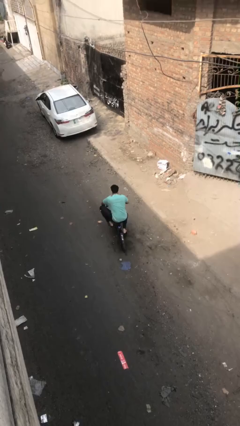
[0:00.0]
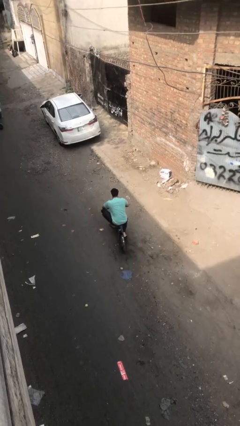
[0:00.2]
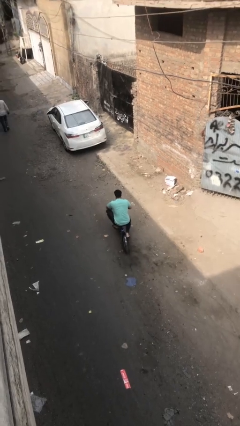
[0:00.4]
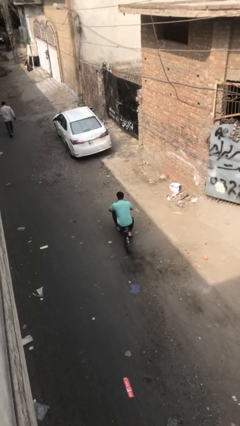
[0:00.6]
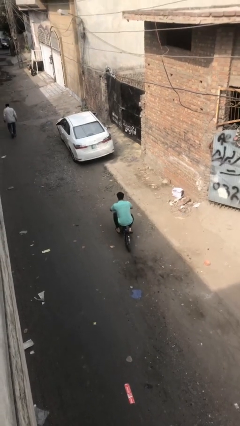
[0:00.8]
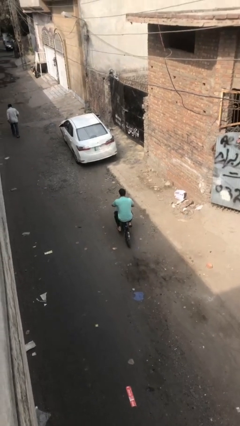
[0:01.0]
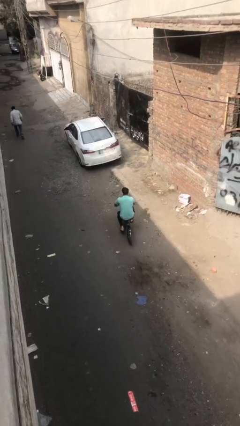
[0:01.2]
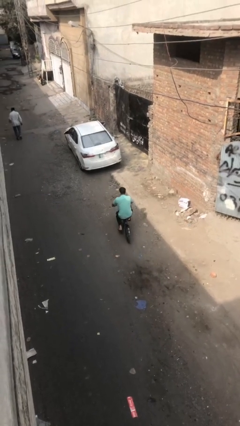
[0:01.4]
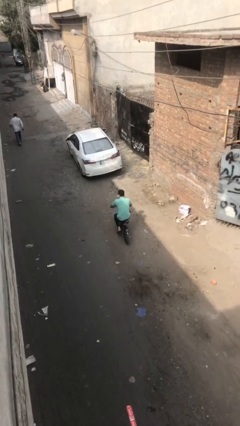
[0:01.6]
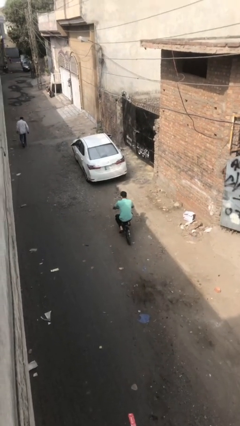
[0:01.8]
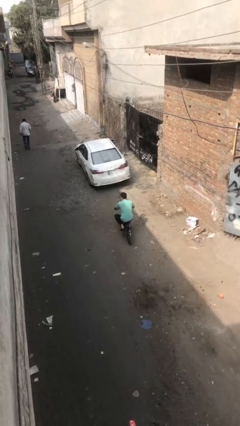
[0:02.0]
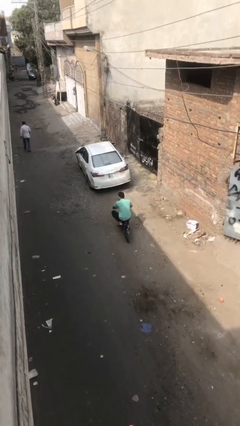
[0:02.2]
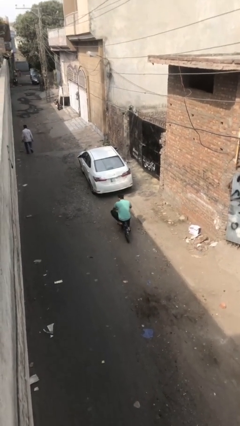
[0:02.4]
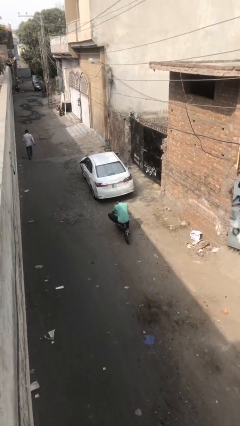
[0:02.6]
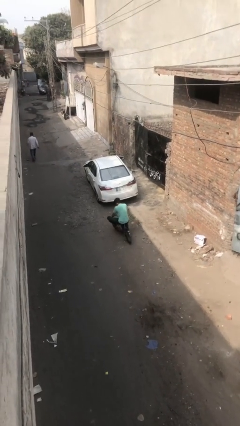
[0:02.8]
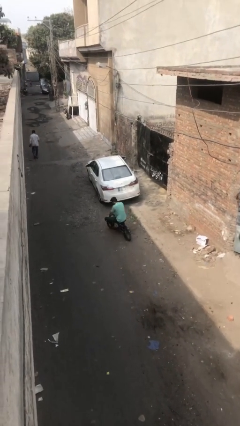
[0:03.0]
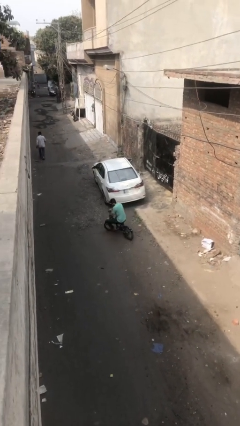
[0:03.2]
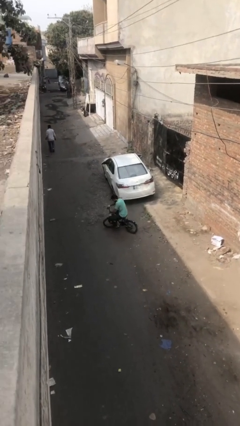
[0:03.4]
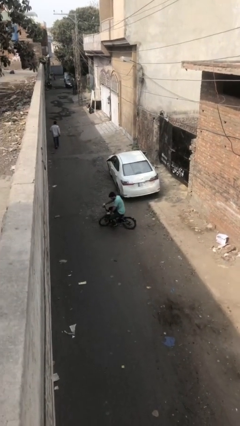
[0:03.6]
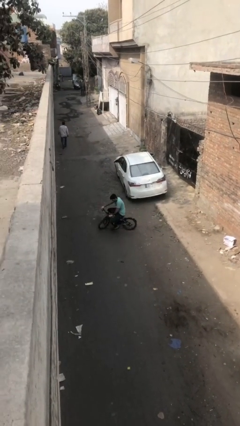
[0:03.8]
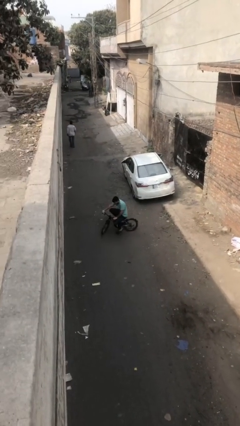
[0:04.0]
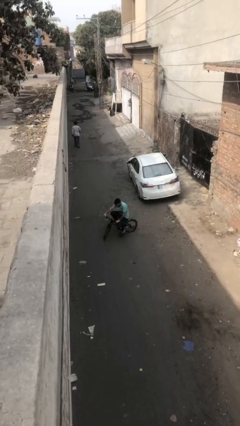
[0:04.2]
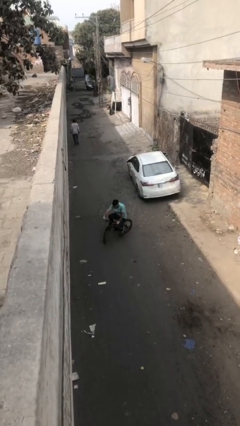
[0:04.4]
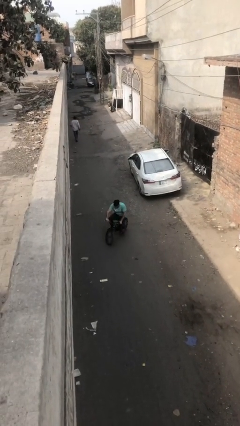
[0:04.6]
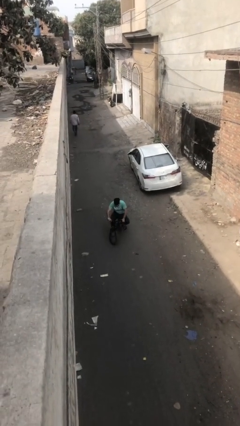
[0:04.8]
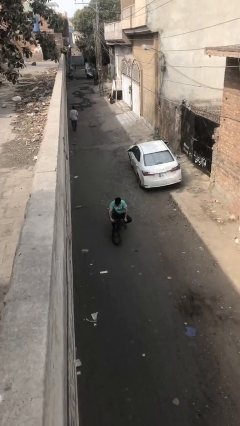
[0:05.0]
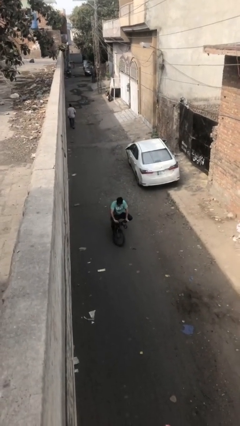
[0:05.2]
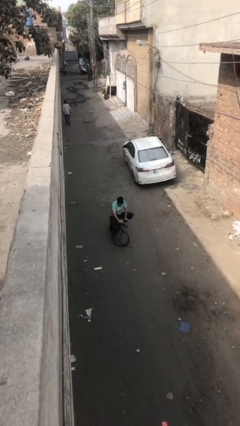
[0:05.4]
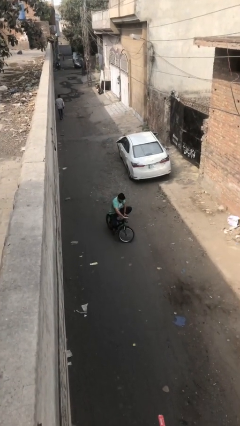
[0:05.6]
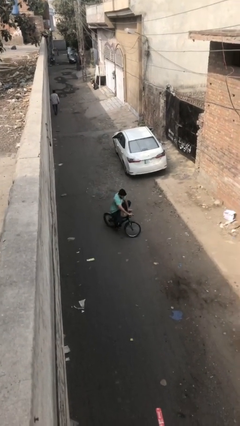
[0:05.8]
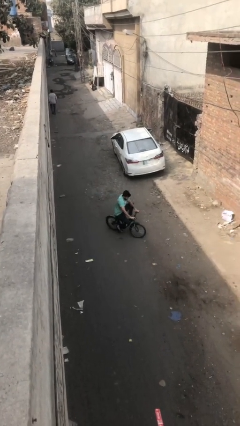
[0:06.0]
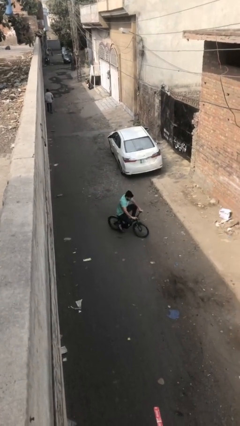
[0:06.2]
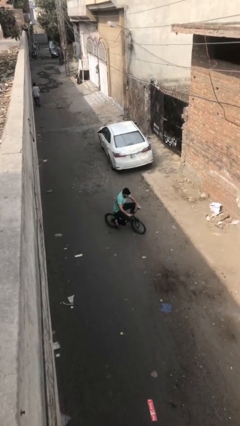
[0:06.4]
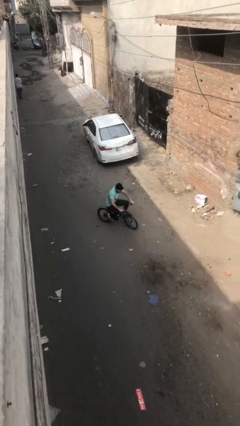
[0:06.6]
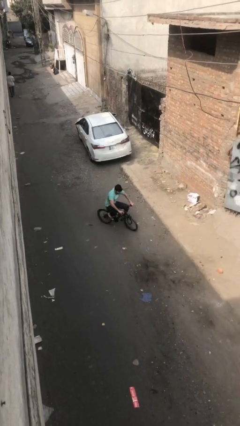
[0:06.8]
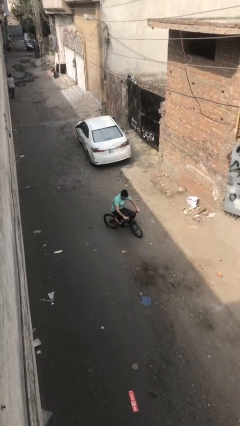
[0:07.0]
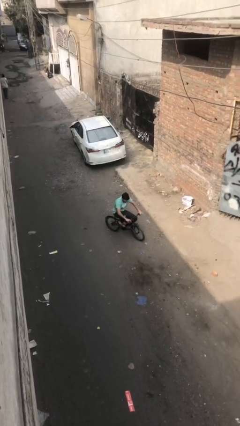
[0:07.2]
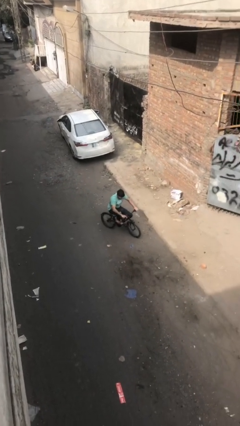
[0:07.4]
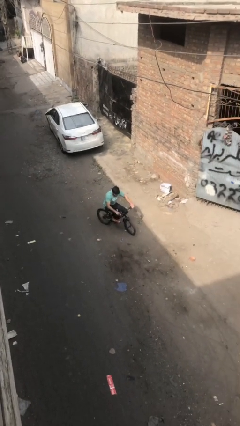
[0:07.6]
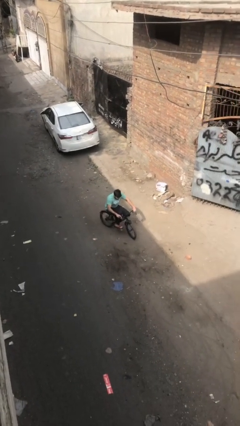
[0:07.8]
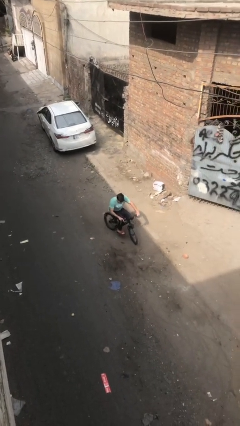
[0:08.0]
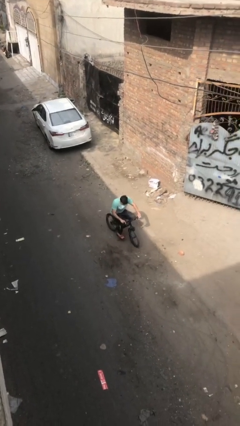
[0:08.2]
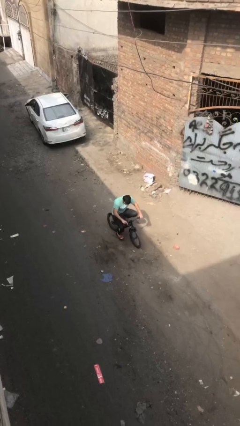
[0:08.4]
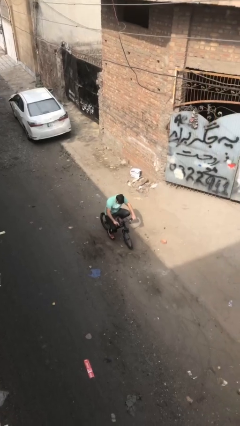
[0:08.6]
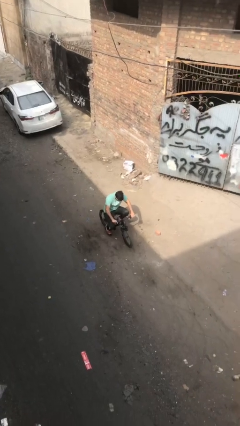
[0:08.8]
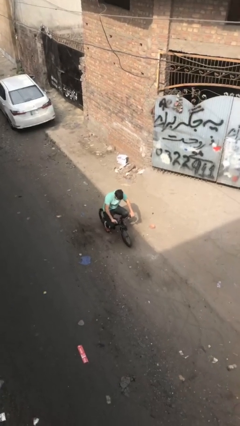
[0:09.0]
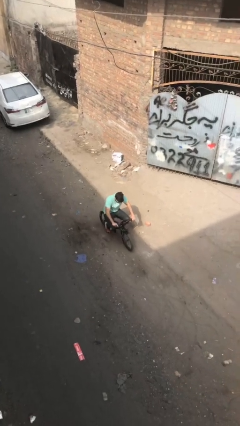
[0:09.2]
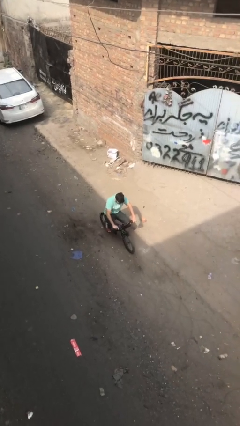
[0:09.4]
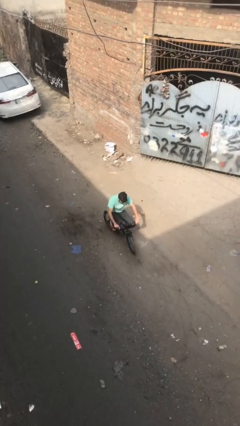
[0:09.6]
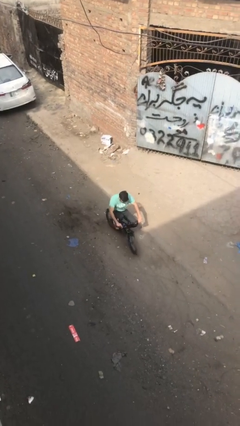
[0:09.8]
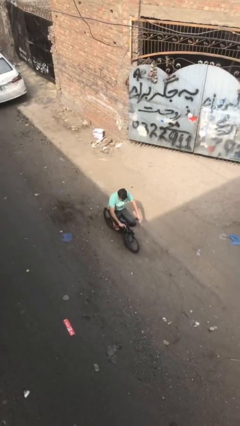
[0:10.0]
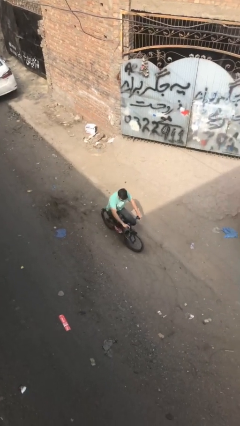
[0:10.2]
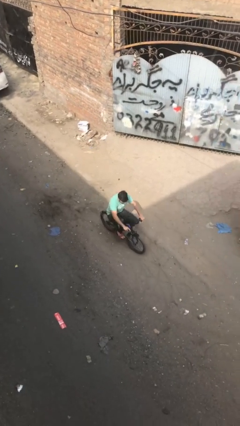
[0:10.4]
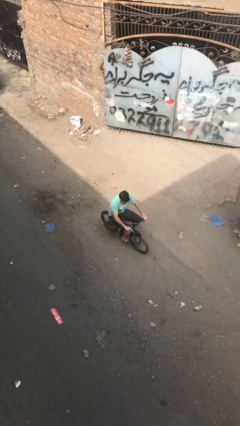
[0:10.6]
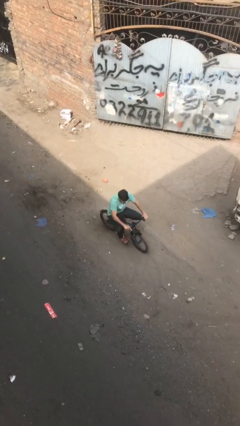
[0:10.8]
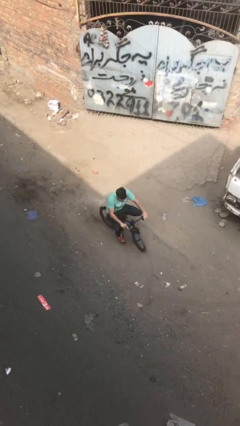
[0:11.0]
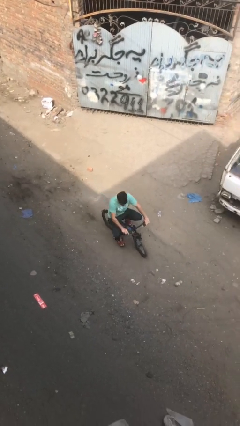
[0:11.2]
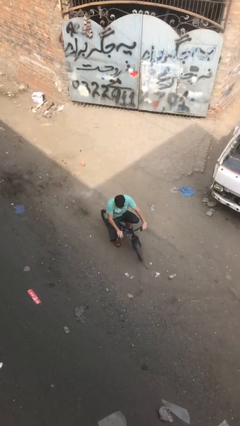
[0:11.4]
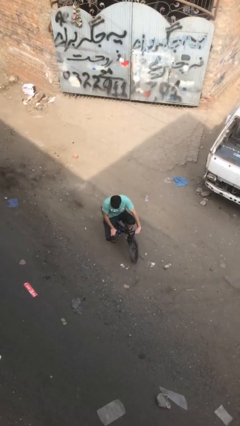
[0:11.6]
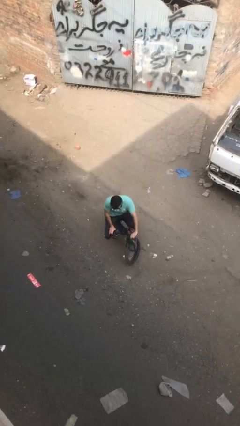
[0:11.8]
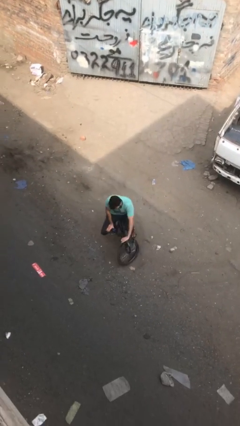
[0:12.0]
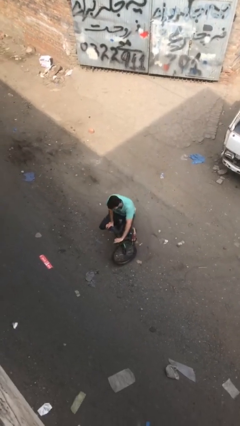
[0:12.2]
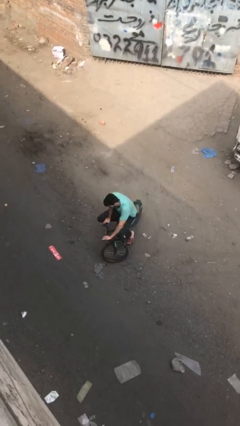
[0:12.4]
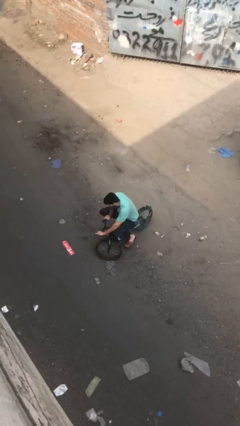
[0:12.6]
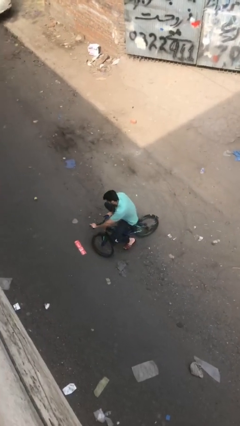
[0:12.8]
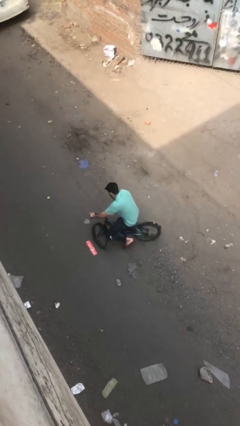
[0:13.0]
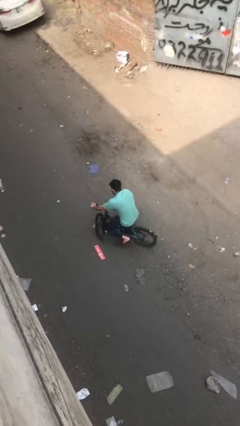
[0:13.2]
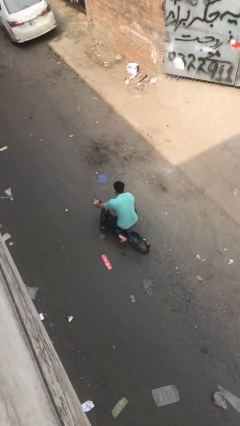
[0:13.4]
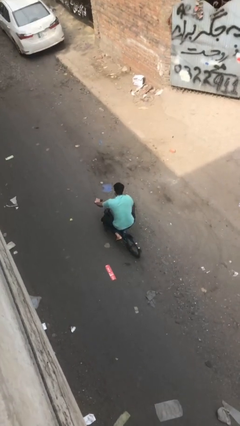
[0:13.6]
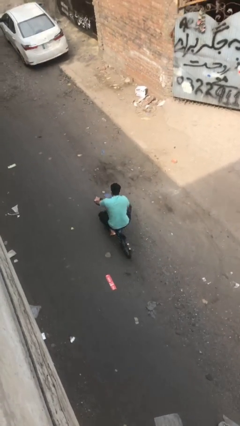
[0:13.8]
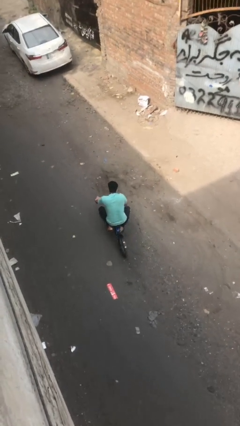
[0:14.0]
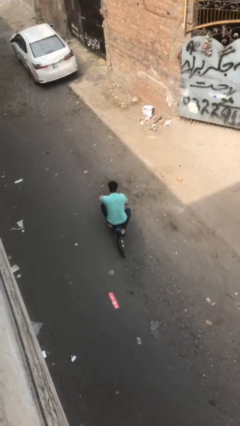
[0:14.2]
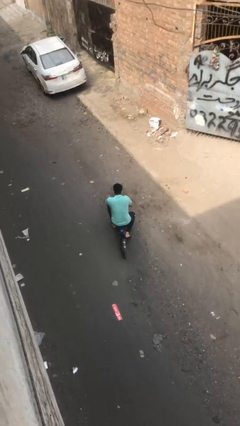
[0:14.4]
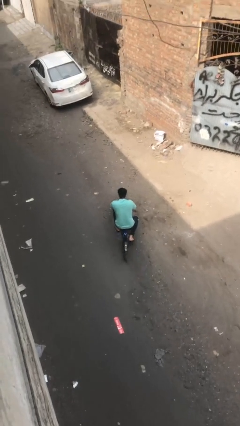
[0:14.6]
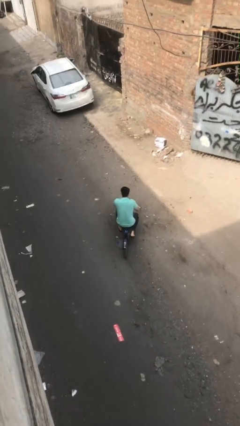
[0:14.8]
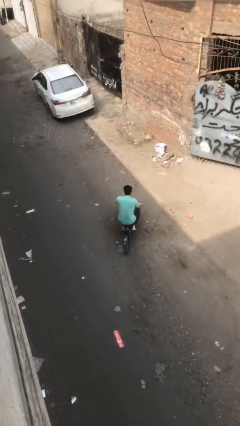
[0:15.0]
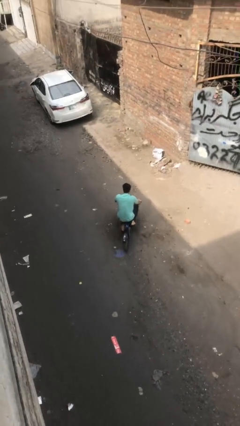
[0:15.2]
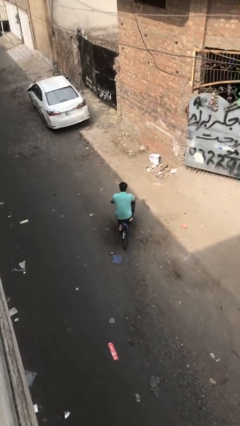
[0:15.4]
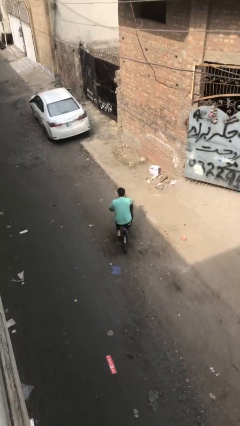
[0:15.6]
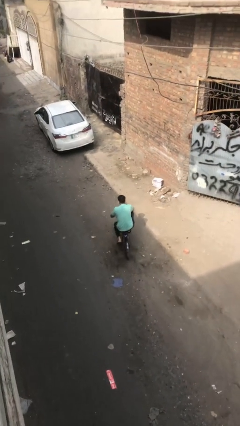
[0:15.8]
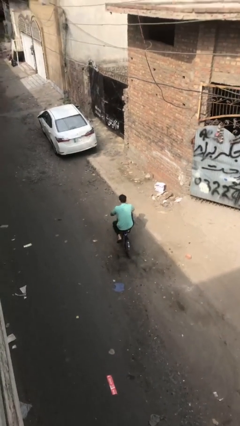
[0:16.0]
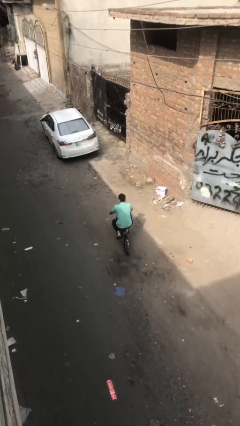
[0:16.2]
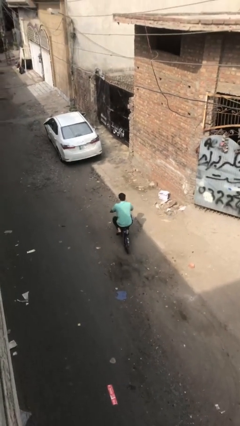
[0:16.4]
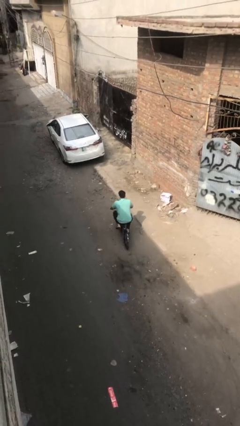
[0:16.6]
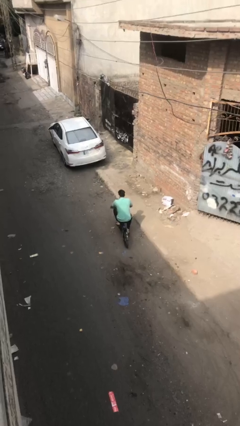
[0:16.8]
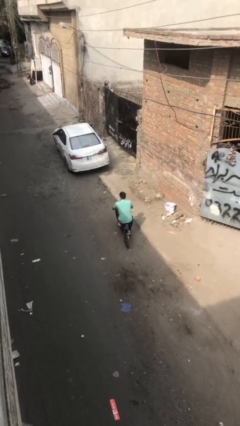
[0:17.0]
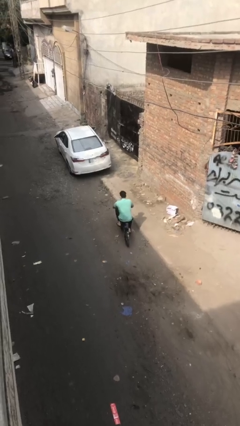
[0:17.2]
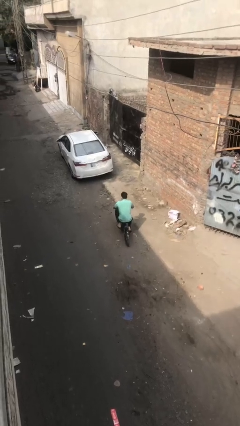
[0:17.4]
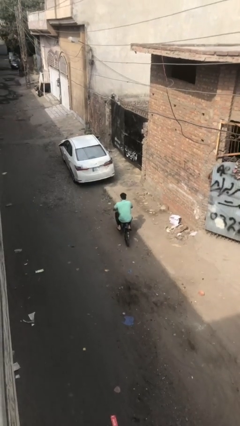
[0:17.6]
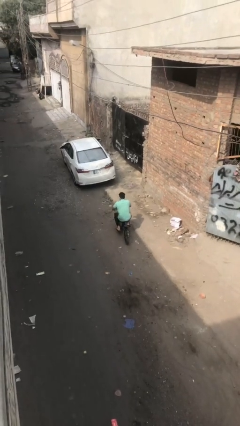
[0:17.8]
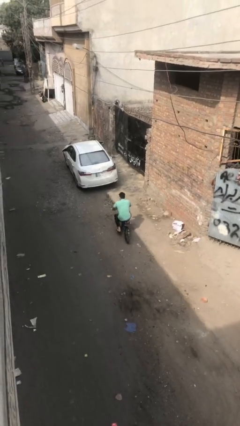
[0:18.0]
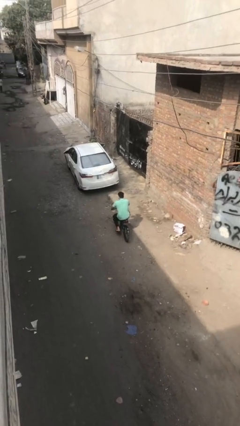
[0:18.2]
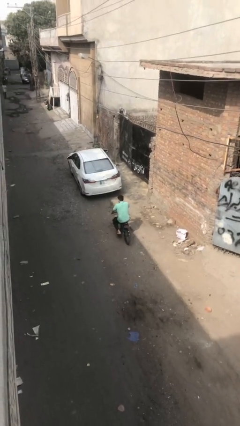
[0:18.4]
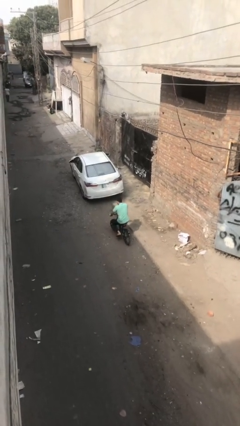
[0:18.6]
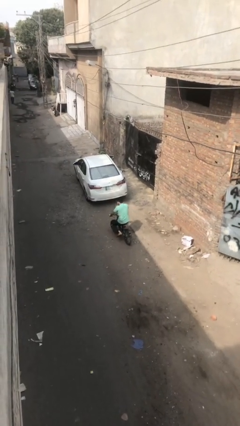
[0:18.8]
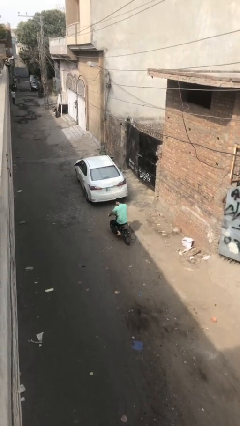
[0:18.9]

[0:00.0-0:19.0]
person rides bicycle
